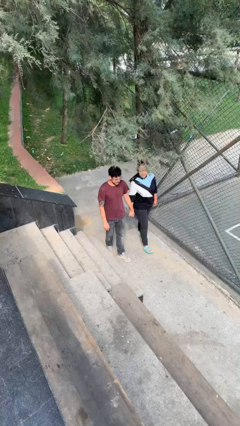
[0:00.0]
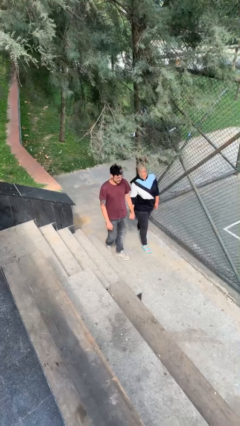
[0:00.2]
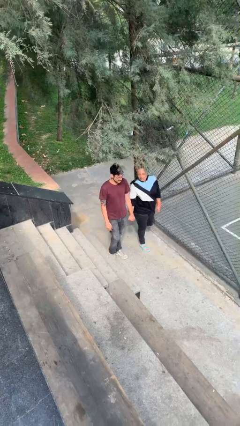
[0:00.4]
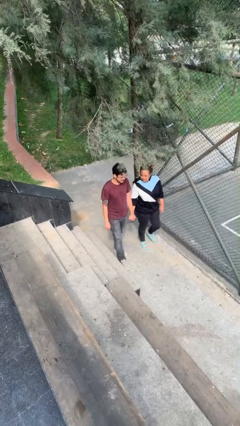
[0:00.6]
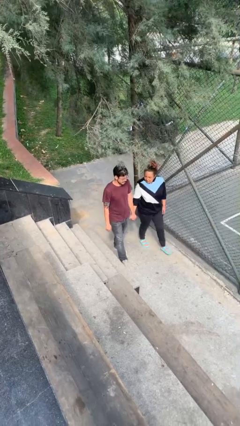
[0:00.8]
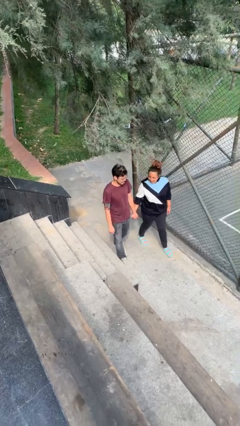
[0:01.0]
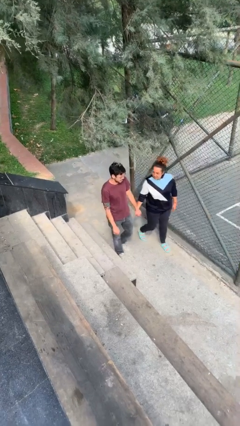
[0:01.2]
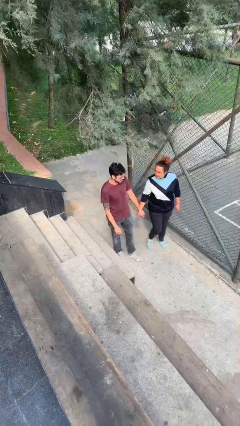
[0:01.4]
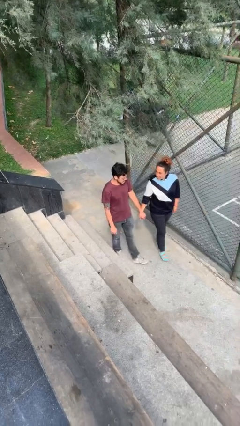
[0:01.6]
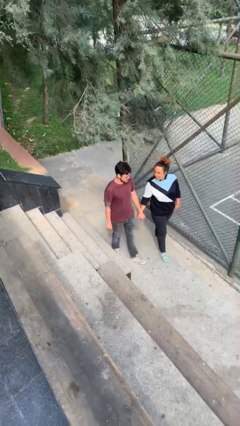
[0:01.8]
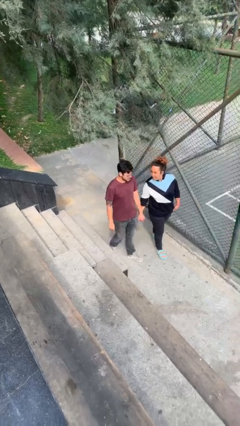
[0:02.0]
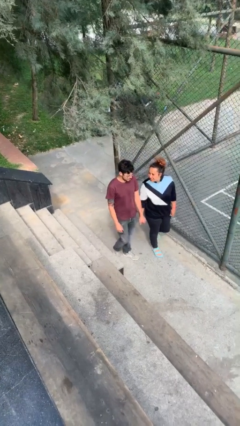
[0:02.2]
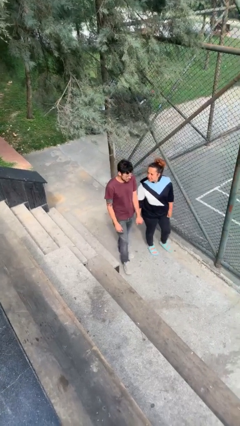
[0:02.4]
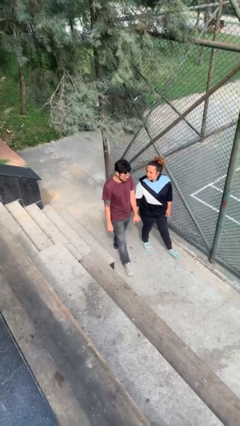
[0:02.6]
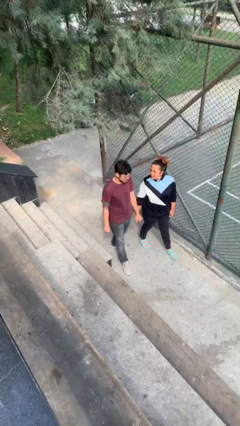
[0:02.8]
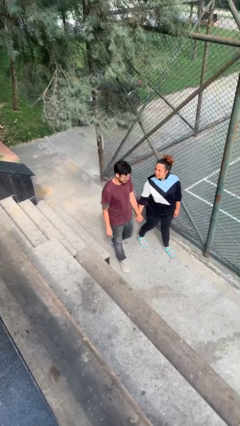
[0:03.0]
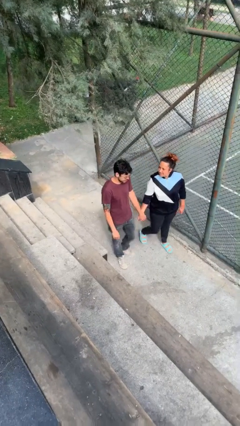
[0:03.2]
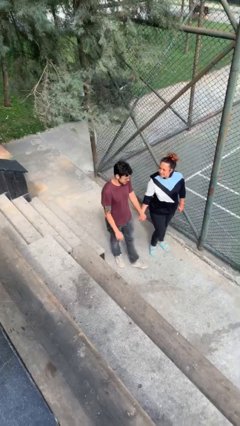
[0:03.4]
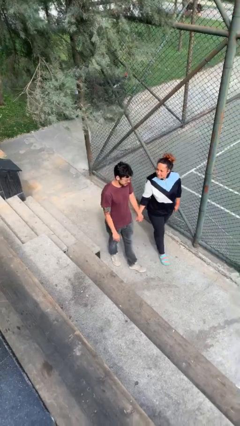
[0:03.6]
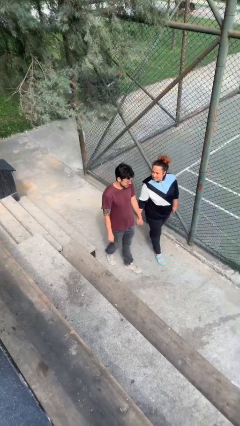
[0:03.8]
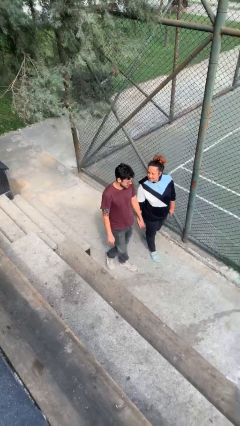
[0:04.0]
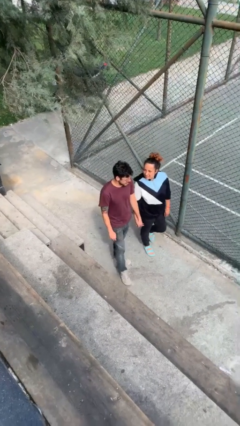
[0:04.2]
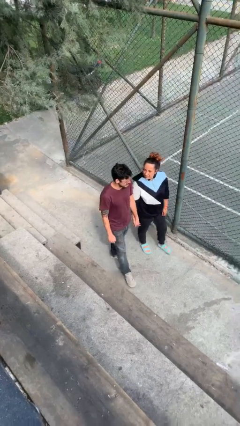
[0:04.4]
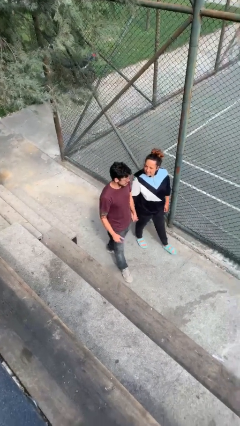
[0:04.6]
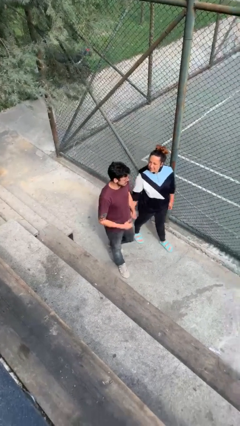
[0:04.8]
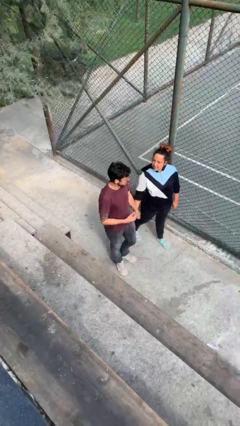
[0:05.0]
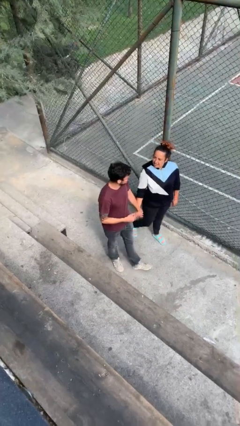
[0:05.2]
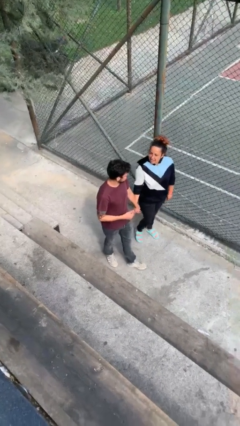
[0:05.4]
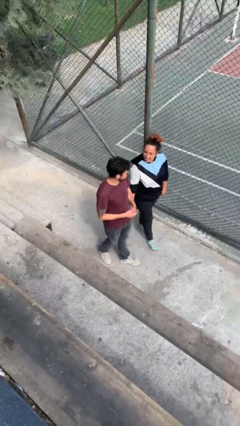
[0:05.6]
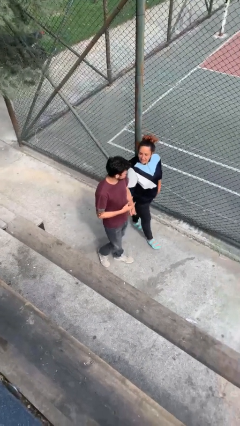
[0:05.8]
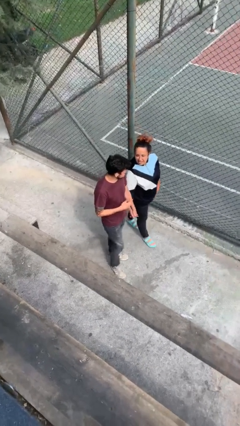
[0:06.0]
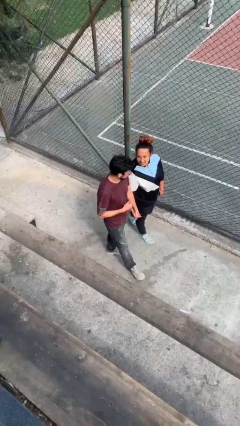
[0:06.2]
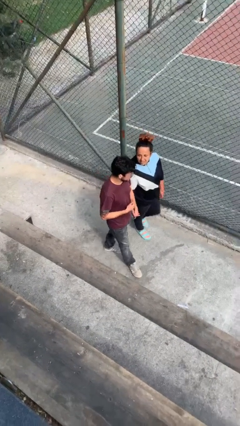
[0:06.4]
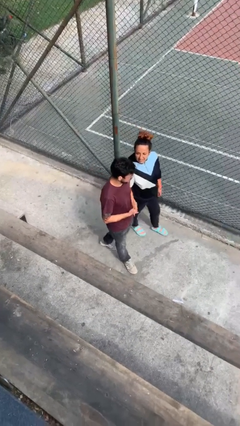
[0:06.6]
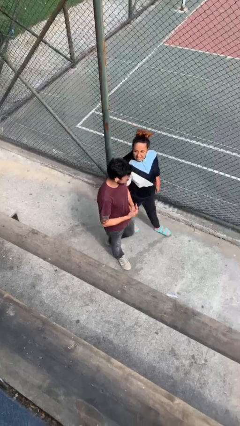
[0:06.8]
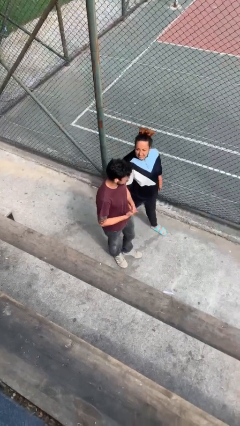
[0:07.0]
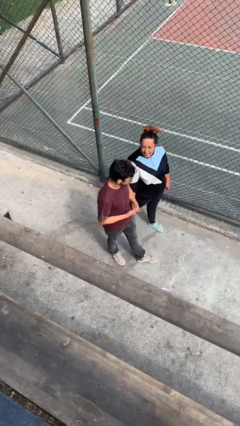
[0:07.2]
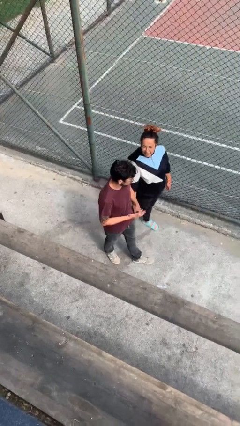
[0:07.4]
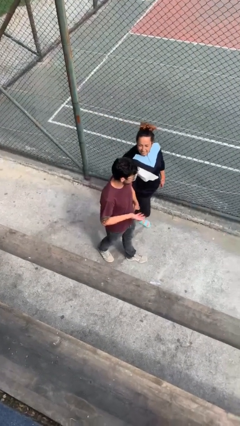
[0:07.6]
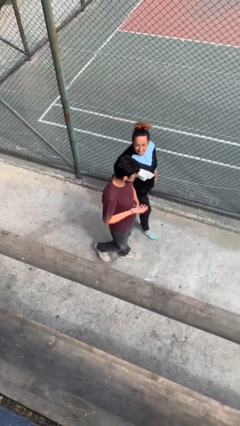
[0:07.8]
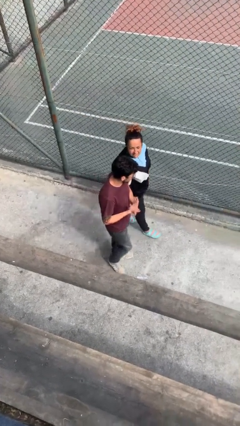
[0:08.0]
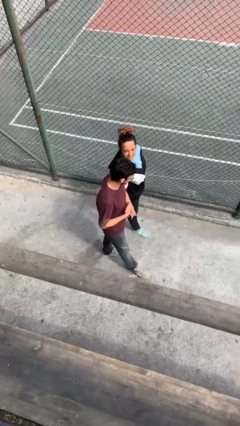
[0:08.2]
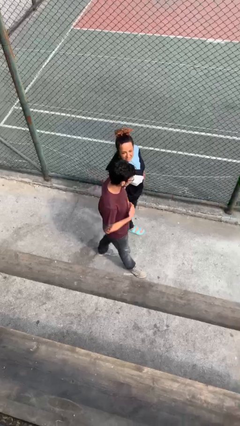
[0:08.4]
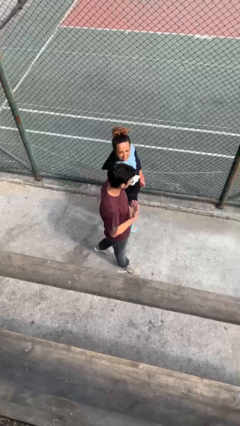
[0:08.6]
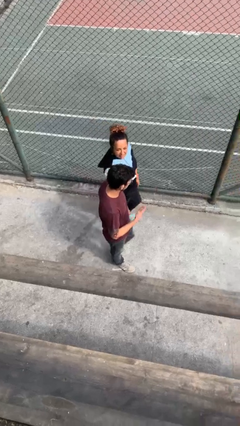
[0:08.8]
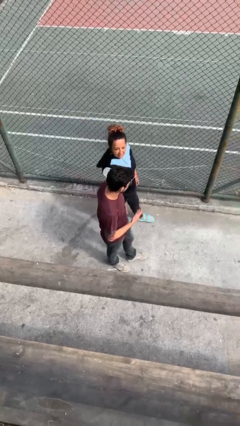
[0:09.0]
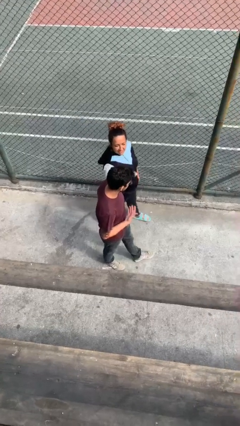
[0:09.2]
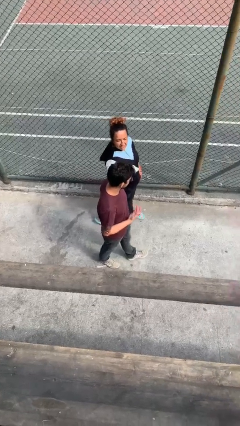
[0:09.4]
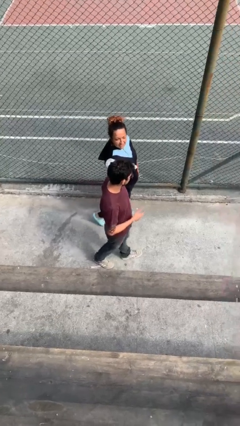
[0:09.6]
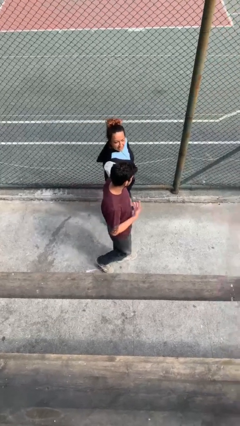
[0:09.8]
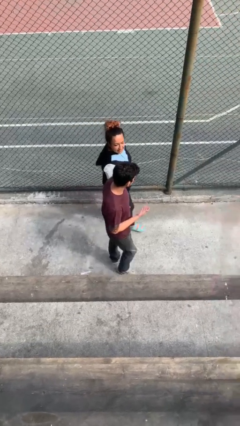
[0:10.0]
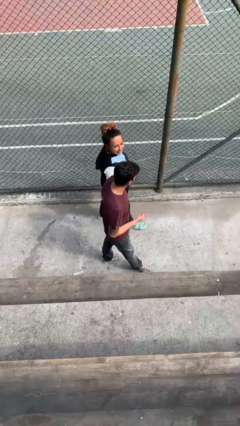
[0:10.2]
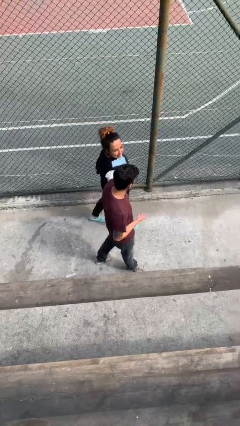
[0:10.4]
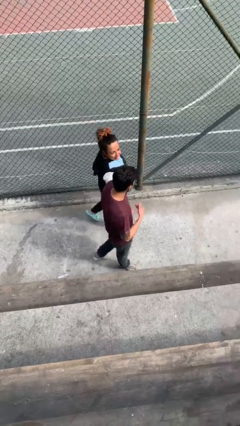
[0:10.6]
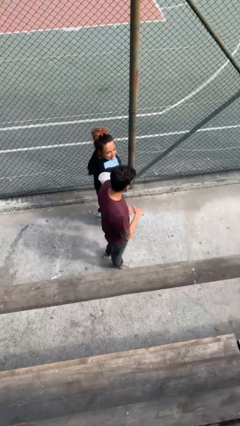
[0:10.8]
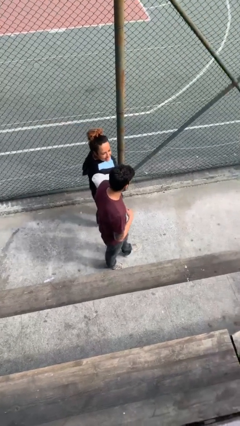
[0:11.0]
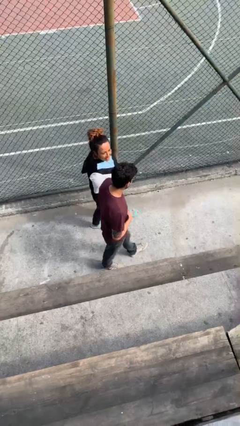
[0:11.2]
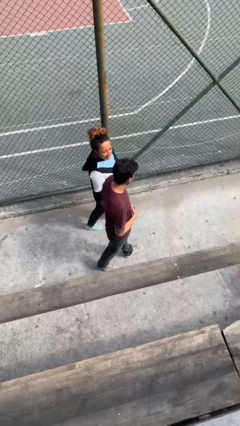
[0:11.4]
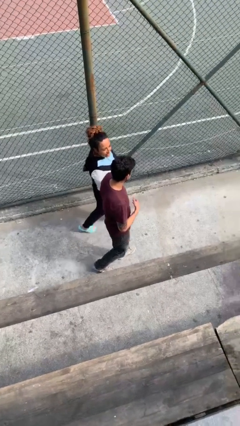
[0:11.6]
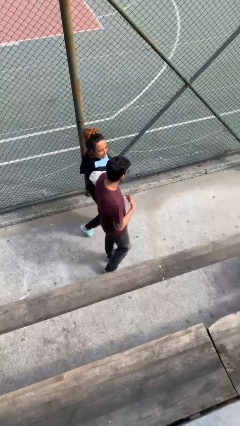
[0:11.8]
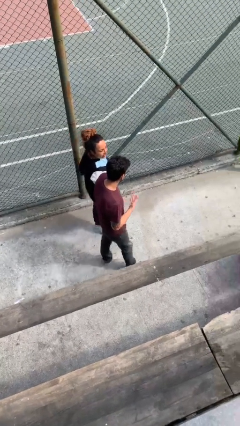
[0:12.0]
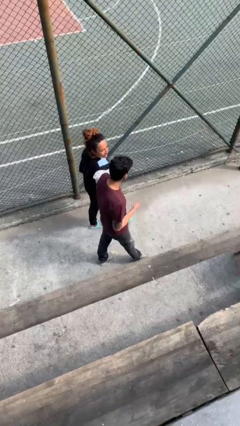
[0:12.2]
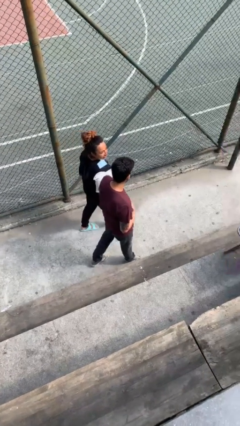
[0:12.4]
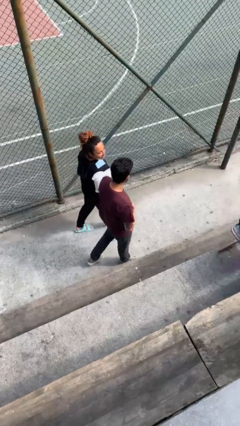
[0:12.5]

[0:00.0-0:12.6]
person holds hand

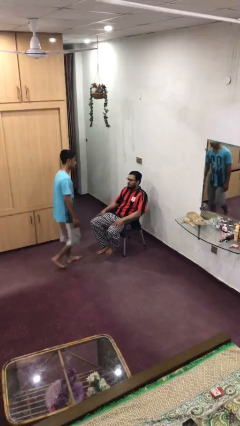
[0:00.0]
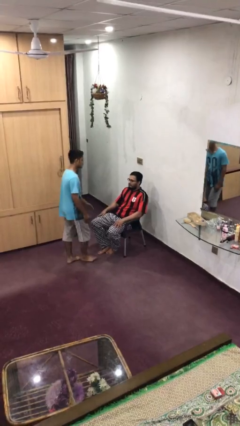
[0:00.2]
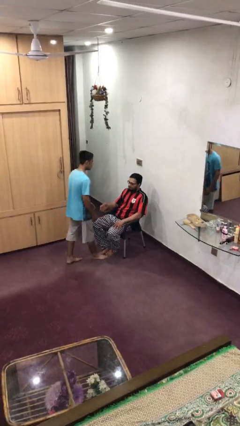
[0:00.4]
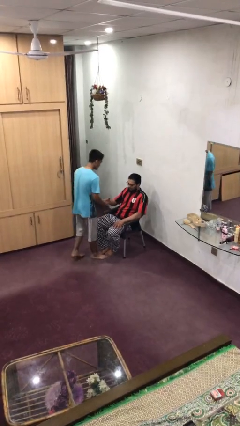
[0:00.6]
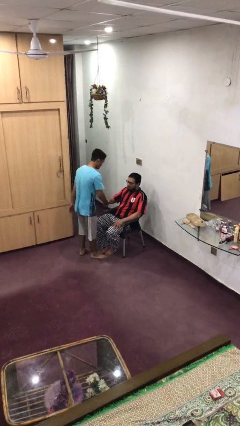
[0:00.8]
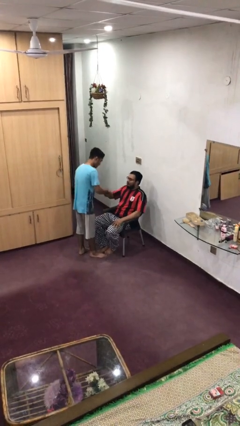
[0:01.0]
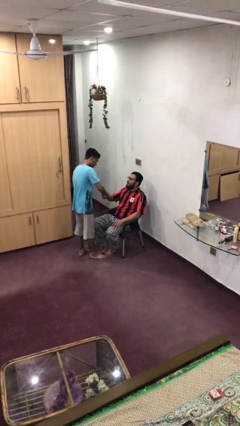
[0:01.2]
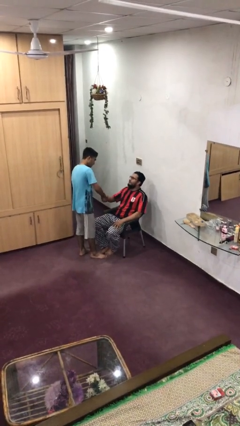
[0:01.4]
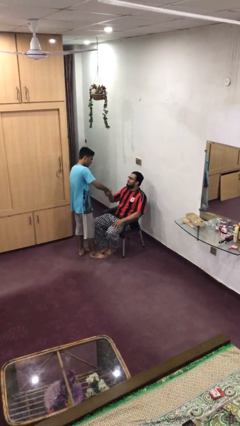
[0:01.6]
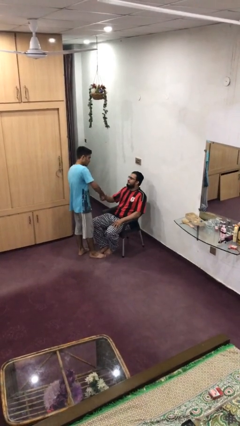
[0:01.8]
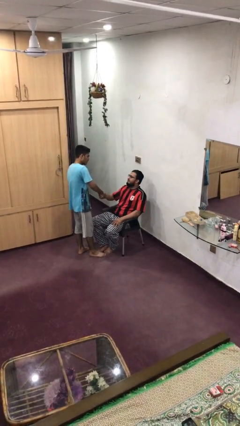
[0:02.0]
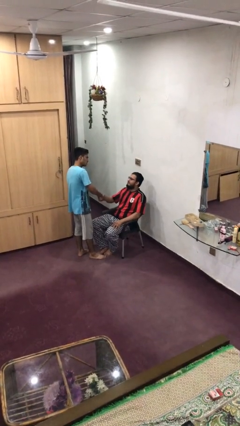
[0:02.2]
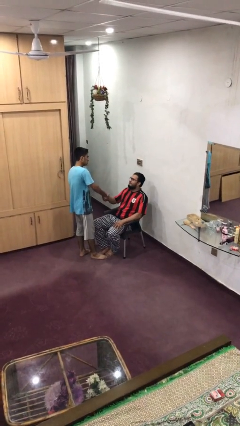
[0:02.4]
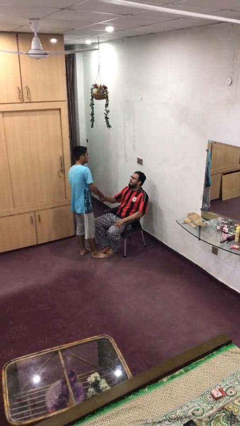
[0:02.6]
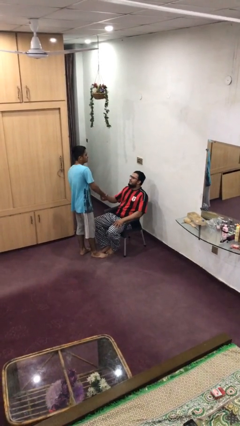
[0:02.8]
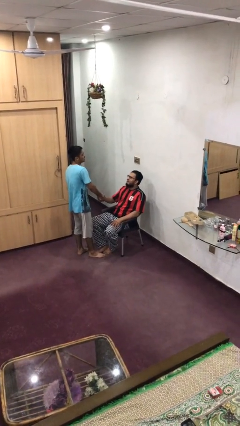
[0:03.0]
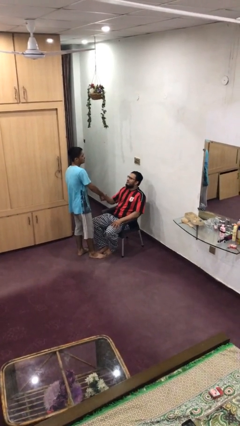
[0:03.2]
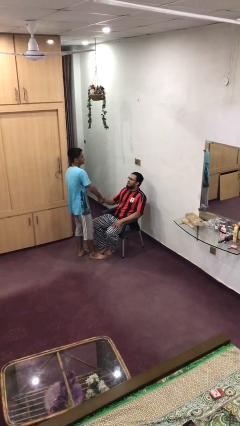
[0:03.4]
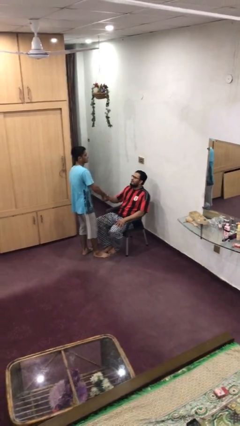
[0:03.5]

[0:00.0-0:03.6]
person shakes hand

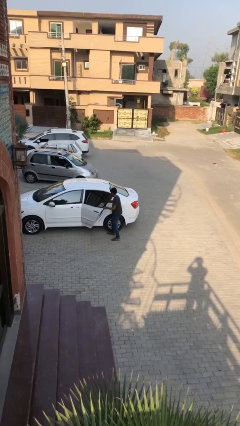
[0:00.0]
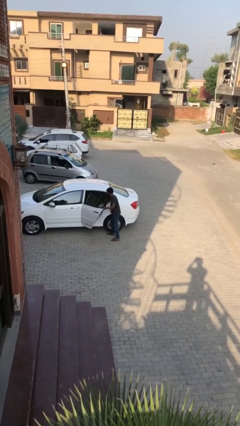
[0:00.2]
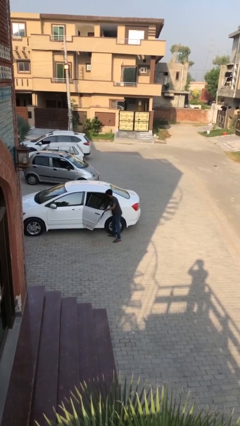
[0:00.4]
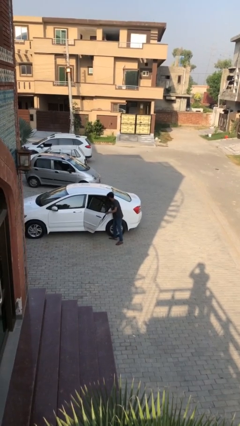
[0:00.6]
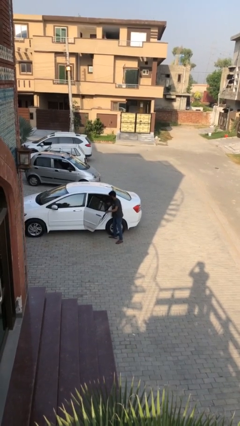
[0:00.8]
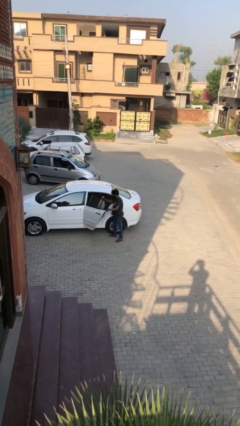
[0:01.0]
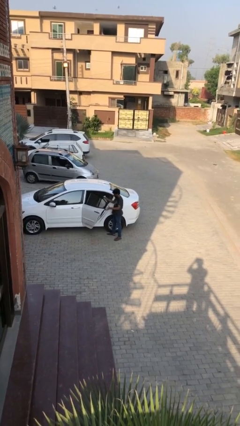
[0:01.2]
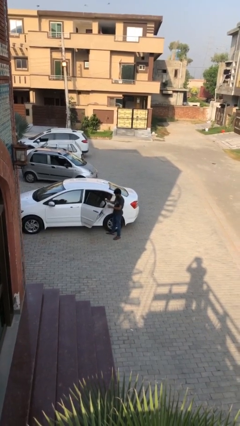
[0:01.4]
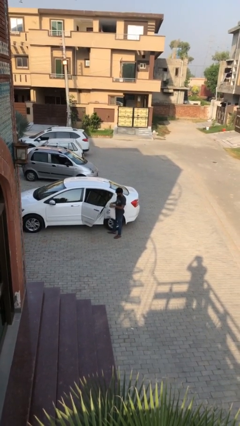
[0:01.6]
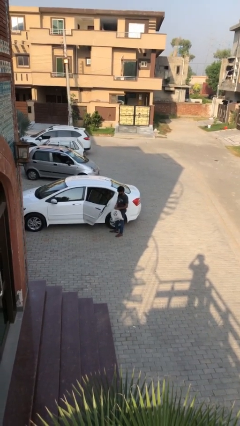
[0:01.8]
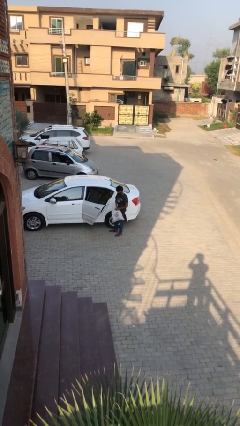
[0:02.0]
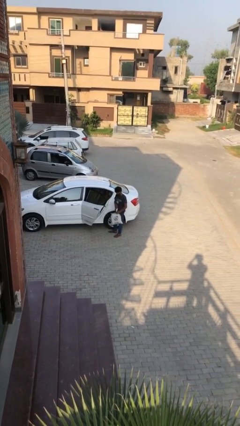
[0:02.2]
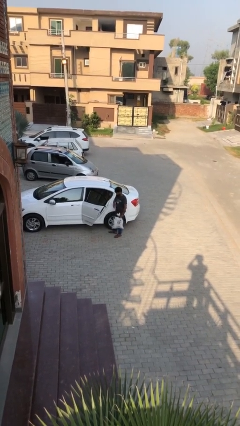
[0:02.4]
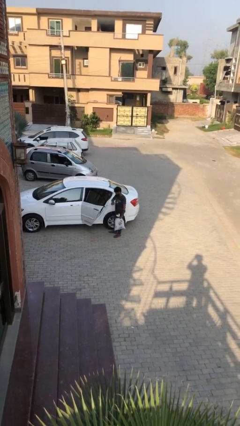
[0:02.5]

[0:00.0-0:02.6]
person unloads car
